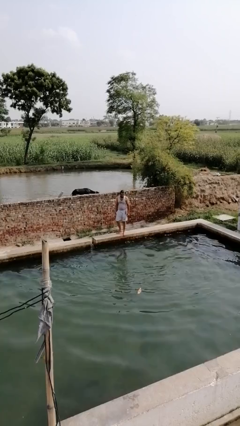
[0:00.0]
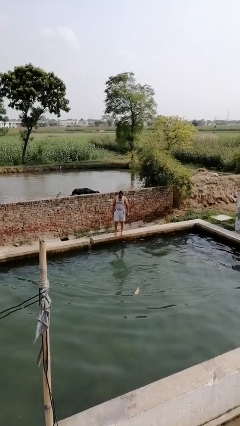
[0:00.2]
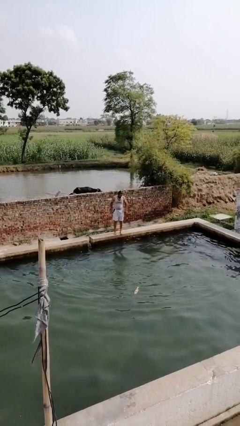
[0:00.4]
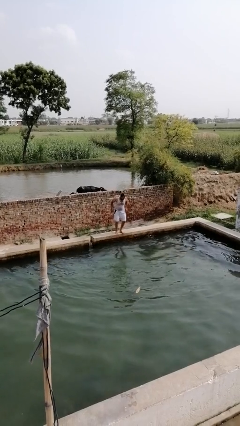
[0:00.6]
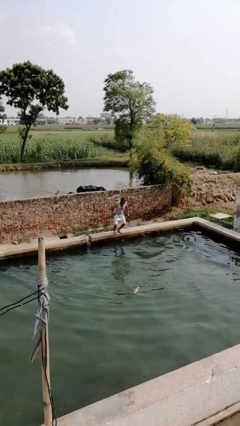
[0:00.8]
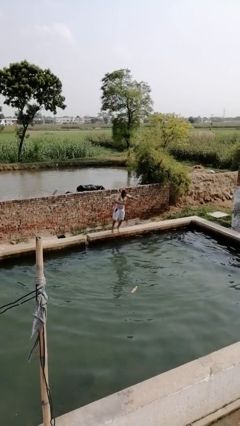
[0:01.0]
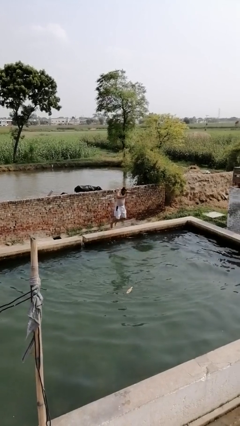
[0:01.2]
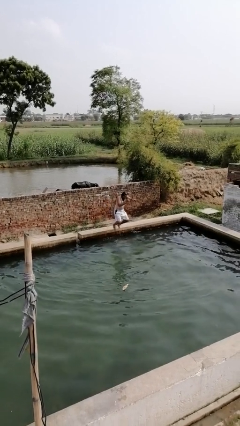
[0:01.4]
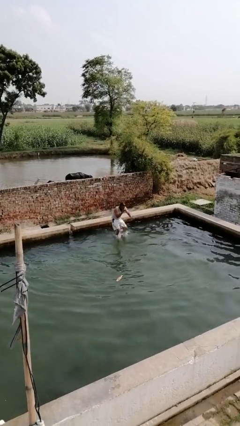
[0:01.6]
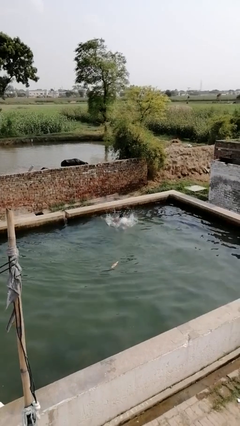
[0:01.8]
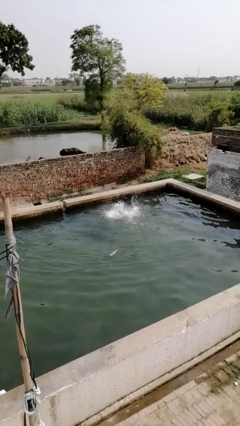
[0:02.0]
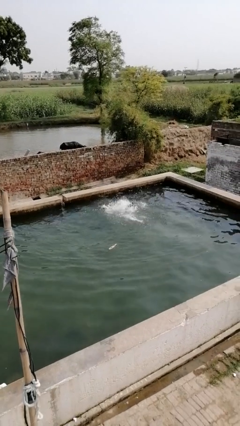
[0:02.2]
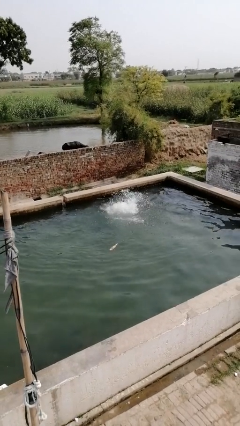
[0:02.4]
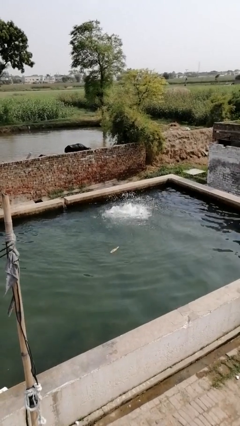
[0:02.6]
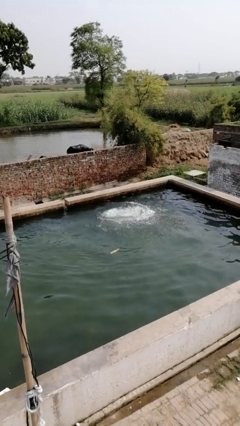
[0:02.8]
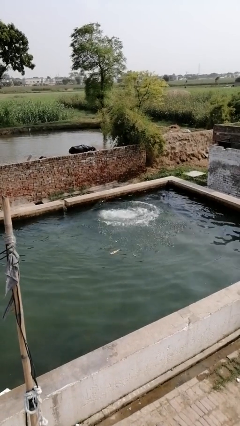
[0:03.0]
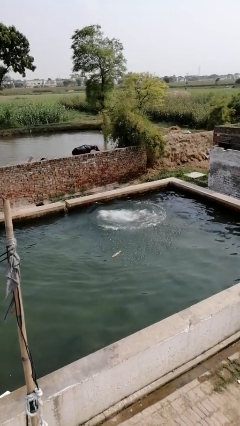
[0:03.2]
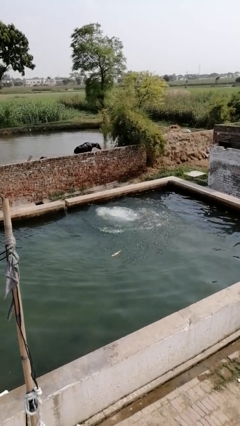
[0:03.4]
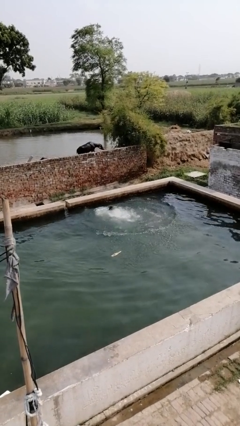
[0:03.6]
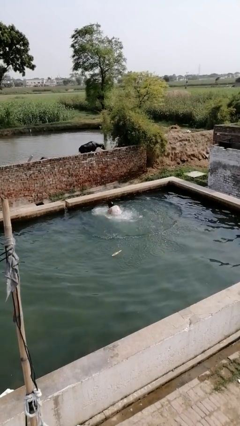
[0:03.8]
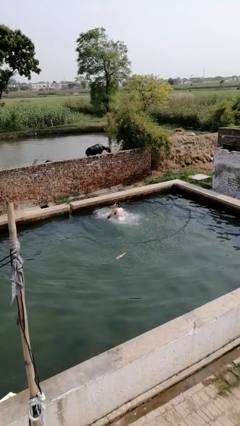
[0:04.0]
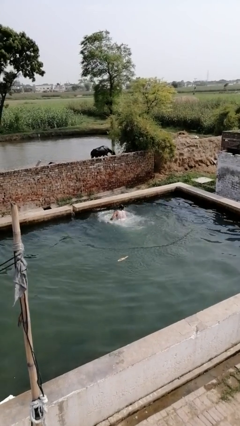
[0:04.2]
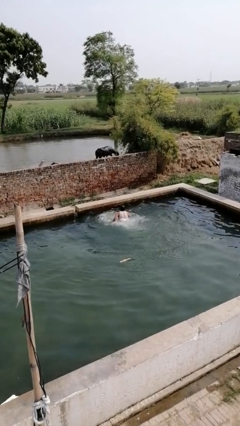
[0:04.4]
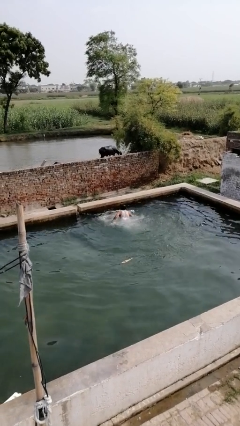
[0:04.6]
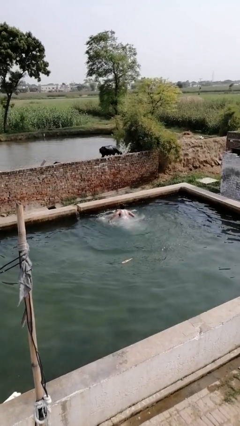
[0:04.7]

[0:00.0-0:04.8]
person jumps into pool

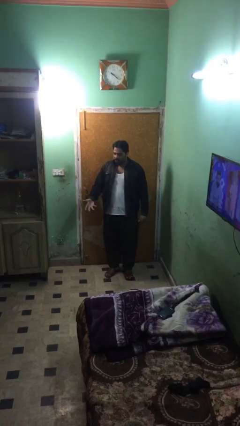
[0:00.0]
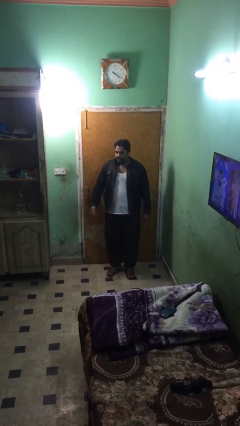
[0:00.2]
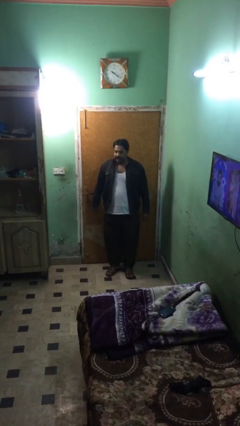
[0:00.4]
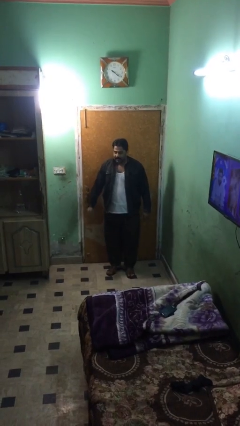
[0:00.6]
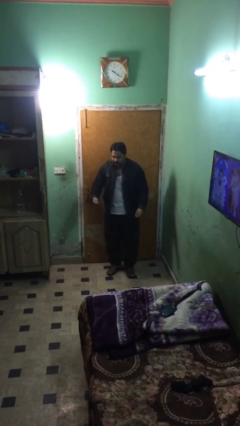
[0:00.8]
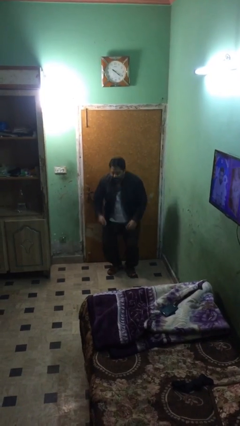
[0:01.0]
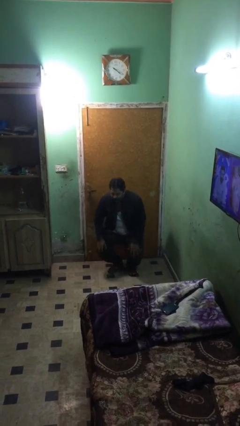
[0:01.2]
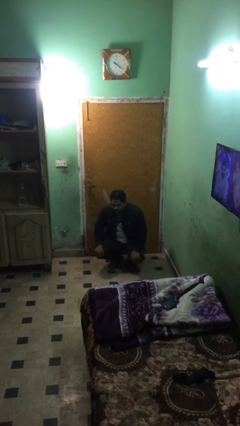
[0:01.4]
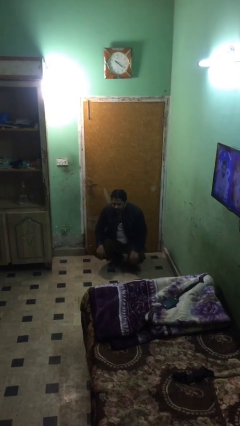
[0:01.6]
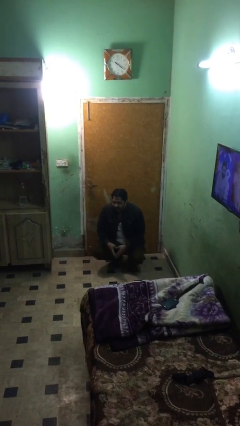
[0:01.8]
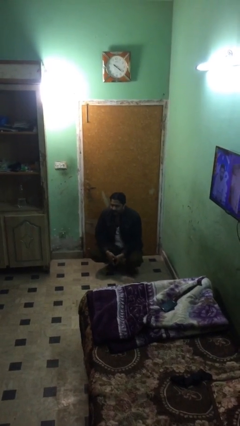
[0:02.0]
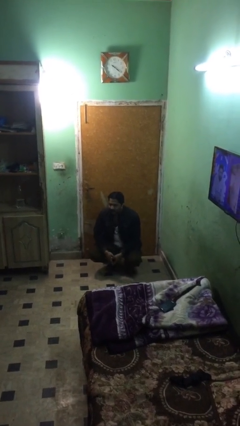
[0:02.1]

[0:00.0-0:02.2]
person sits down

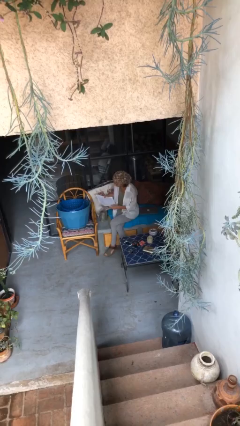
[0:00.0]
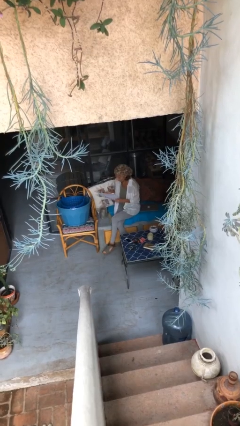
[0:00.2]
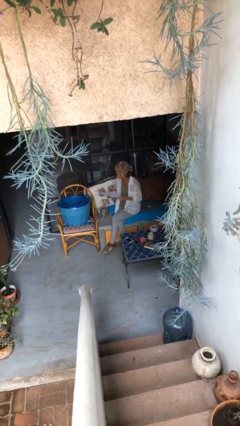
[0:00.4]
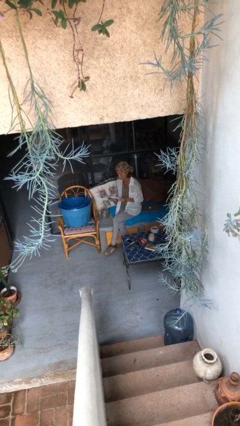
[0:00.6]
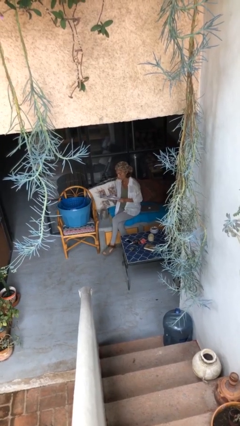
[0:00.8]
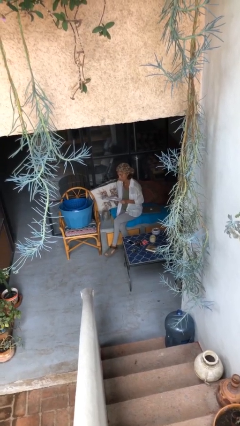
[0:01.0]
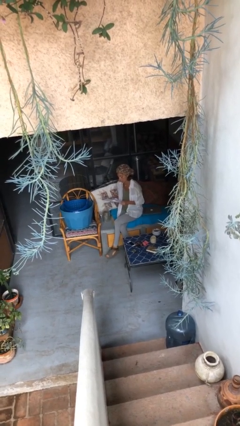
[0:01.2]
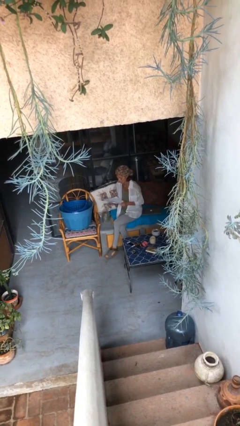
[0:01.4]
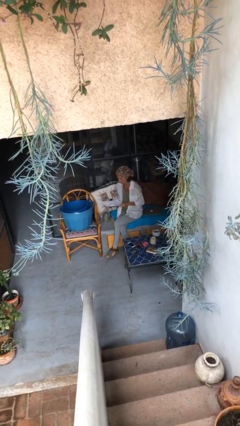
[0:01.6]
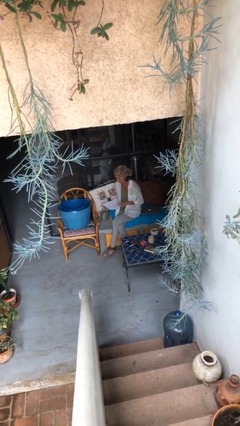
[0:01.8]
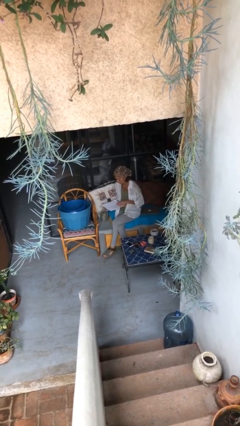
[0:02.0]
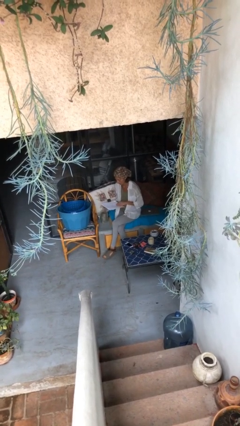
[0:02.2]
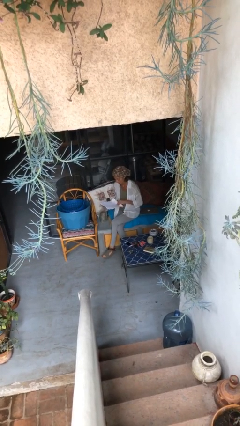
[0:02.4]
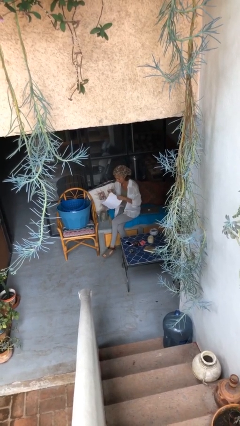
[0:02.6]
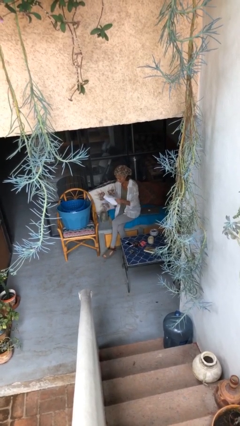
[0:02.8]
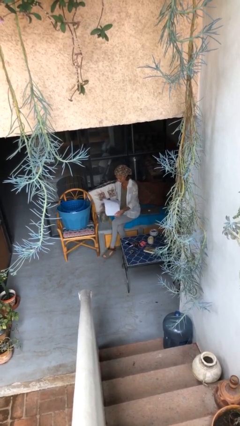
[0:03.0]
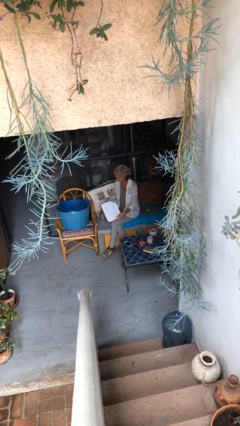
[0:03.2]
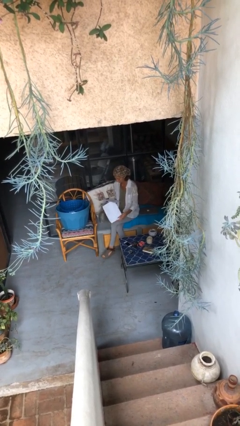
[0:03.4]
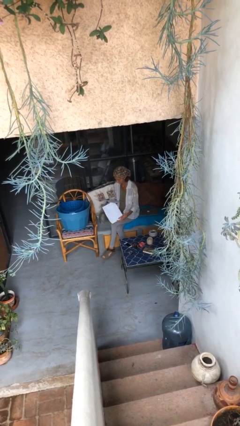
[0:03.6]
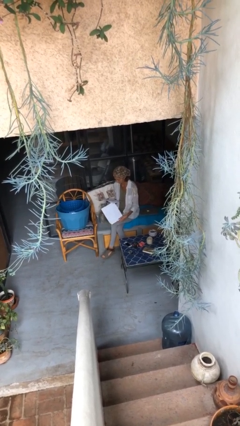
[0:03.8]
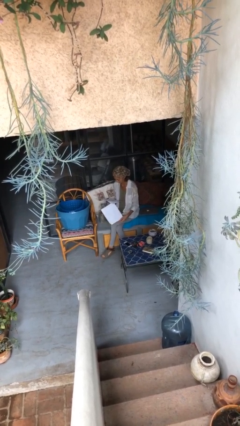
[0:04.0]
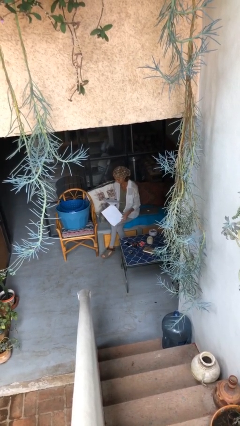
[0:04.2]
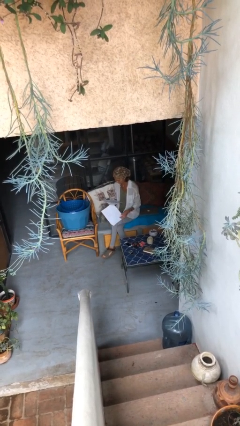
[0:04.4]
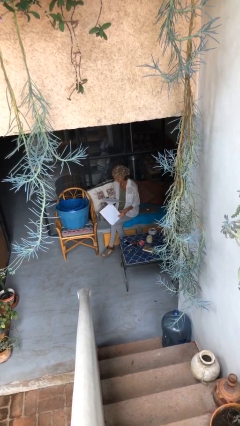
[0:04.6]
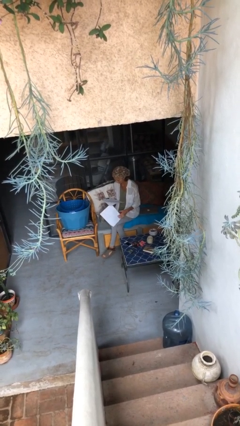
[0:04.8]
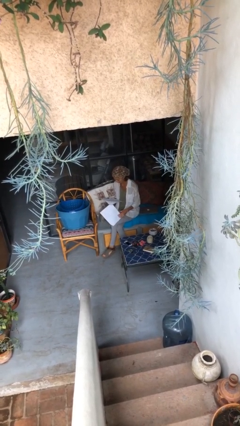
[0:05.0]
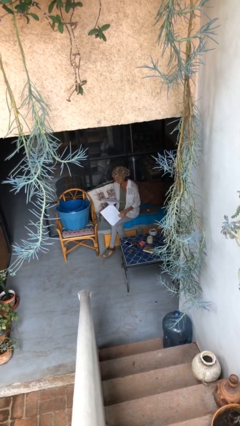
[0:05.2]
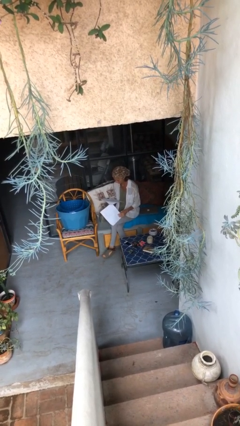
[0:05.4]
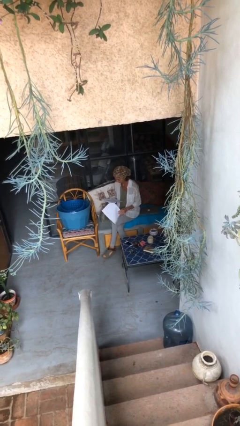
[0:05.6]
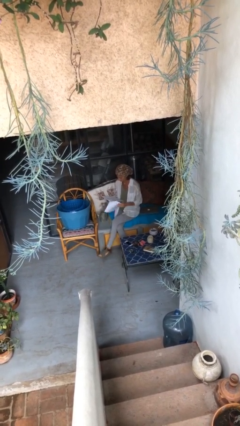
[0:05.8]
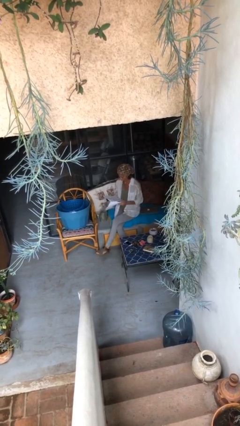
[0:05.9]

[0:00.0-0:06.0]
person reads document

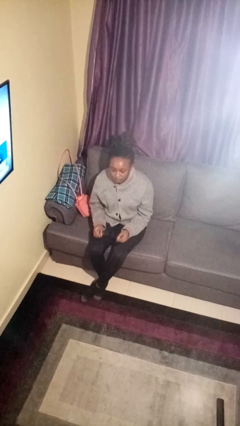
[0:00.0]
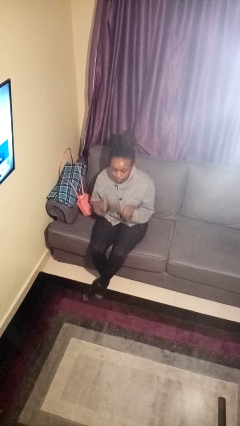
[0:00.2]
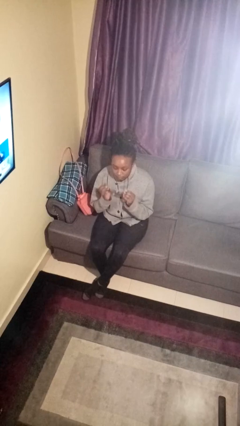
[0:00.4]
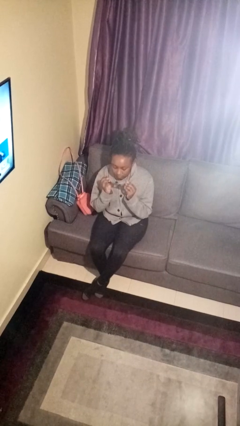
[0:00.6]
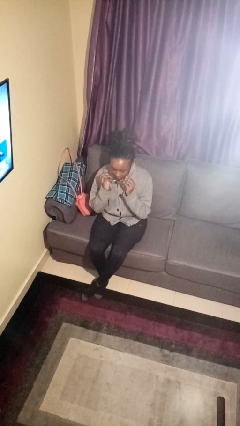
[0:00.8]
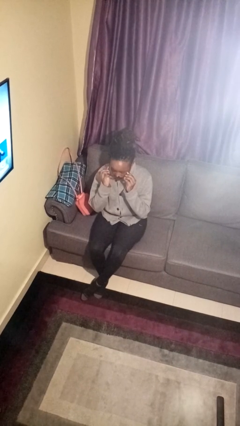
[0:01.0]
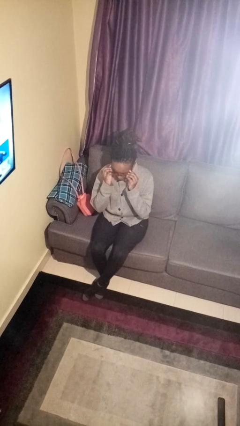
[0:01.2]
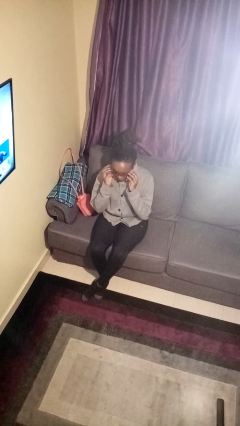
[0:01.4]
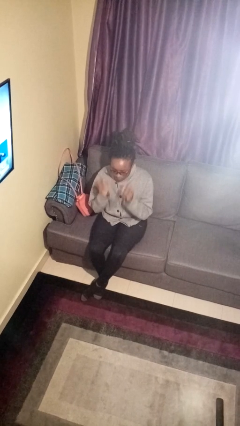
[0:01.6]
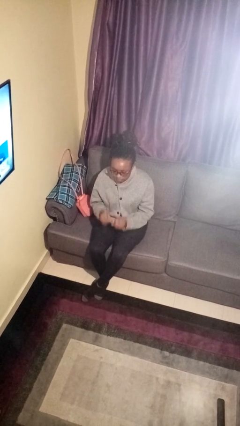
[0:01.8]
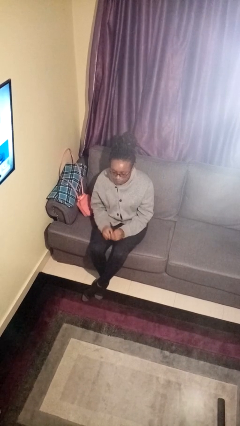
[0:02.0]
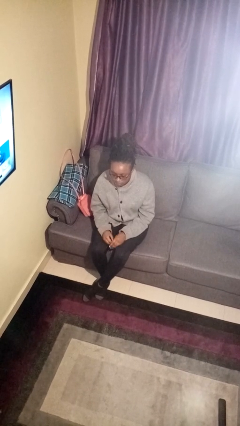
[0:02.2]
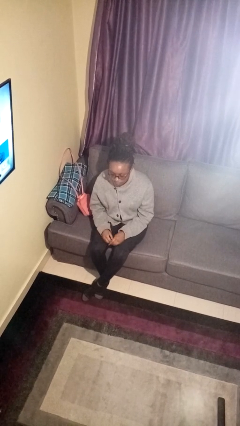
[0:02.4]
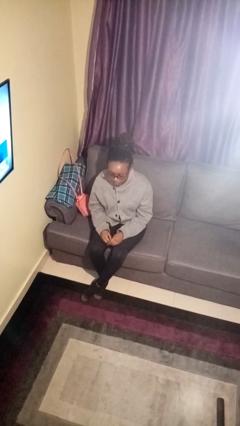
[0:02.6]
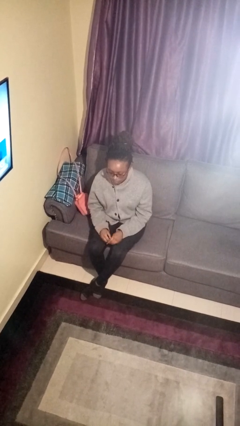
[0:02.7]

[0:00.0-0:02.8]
person puts on glasses

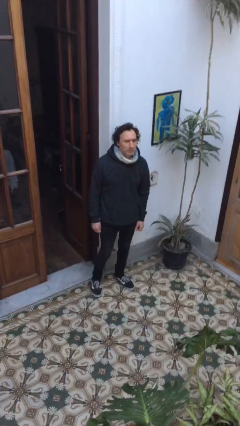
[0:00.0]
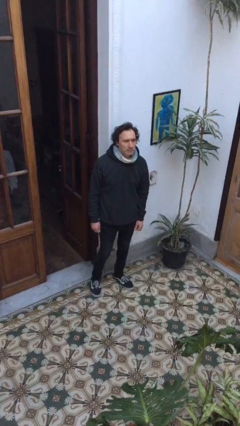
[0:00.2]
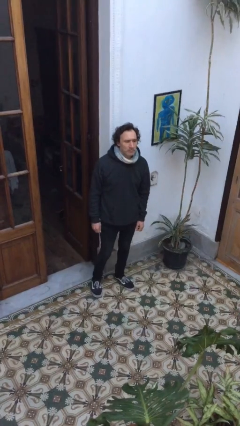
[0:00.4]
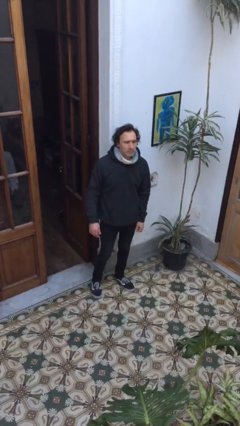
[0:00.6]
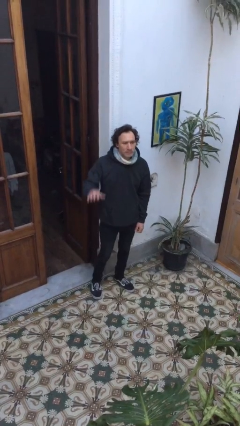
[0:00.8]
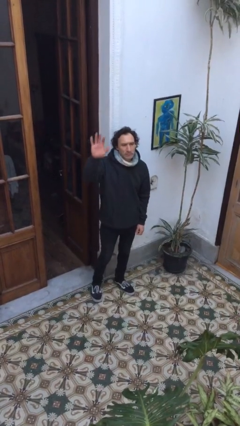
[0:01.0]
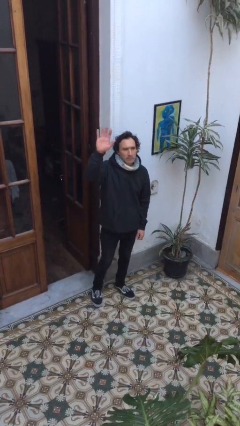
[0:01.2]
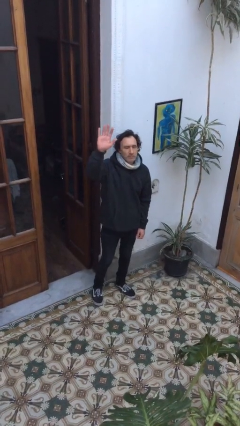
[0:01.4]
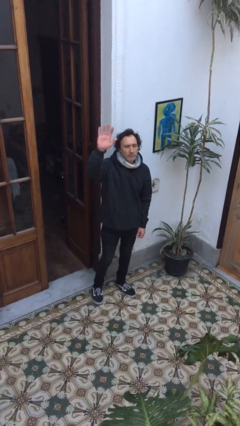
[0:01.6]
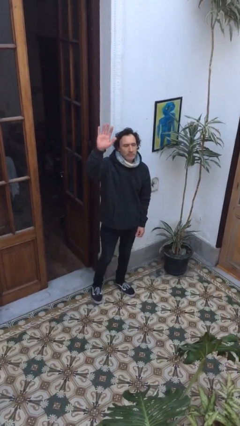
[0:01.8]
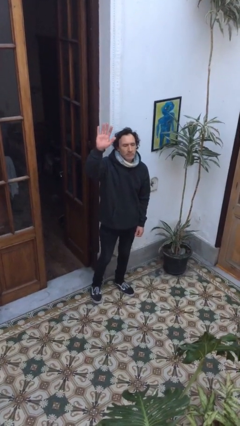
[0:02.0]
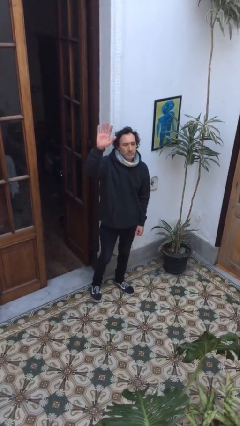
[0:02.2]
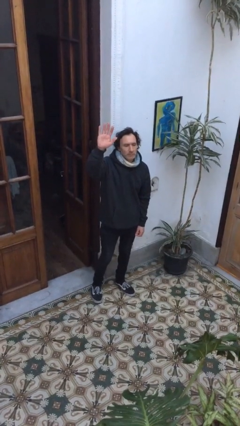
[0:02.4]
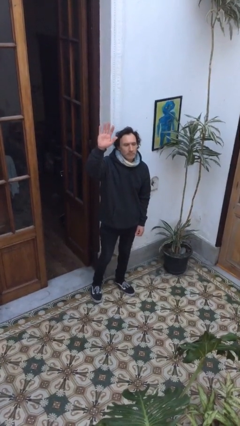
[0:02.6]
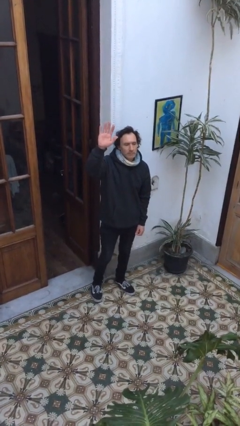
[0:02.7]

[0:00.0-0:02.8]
person gestures raise hand
